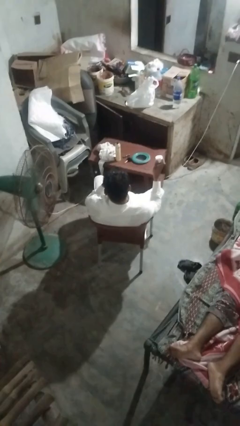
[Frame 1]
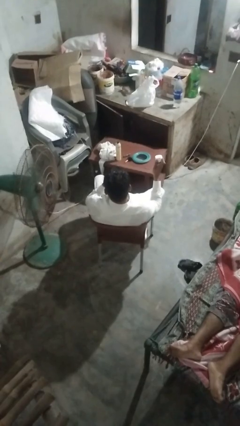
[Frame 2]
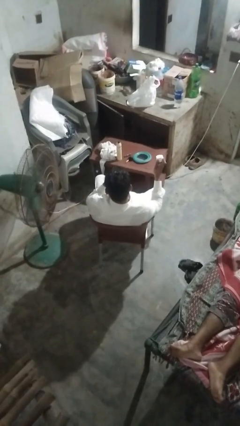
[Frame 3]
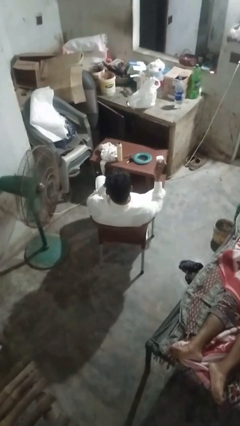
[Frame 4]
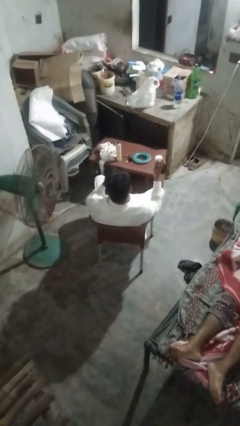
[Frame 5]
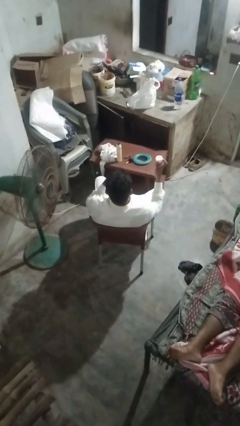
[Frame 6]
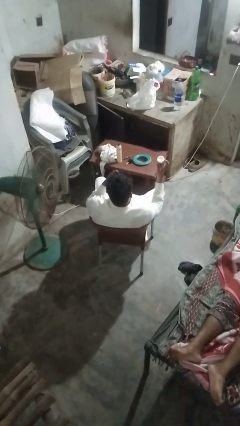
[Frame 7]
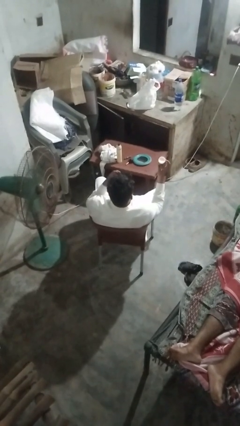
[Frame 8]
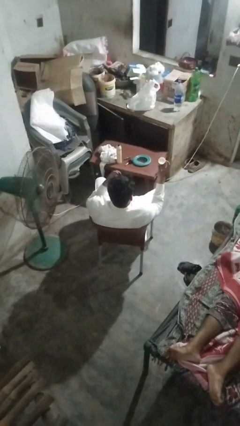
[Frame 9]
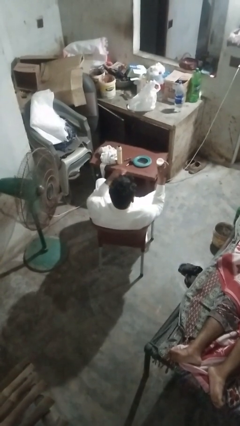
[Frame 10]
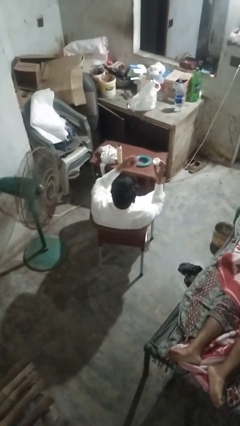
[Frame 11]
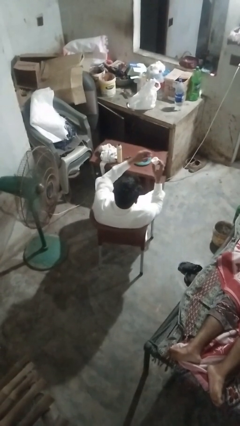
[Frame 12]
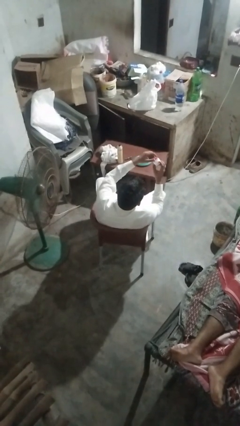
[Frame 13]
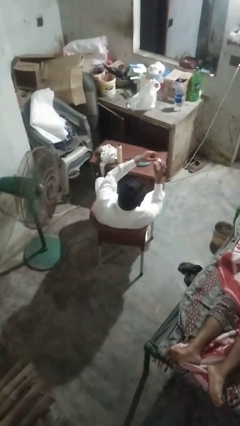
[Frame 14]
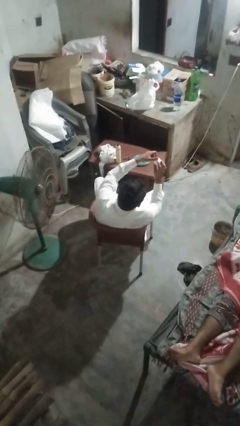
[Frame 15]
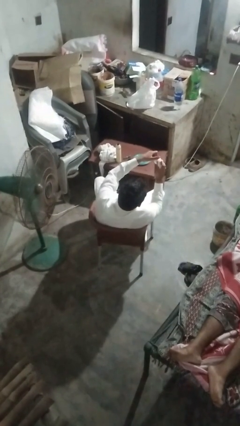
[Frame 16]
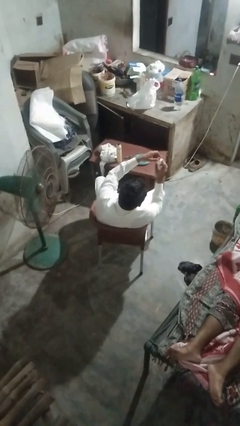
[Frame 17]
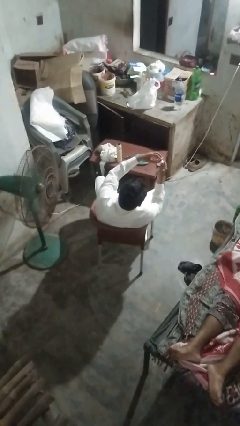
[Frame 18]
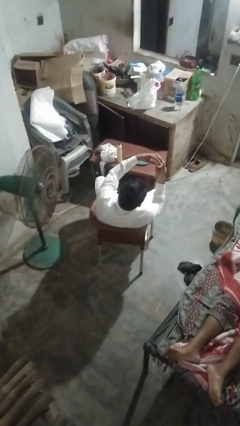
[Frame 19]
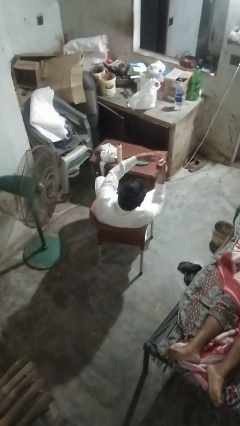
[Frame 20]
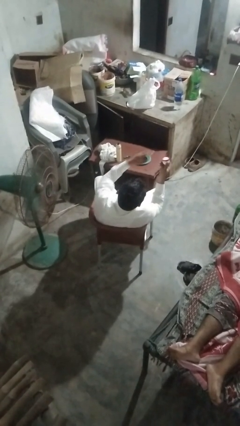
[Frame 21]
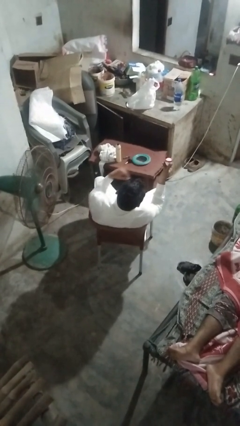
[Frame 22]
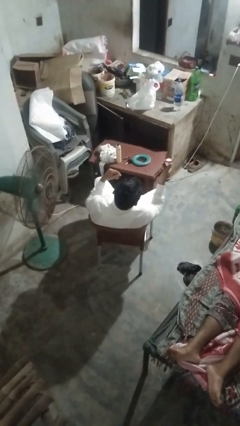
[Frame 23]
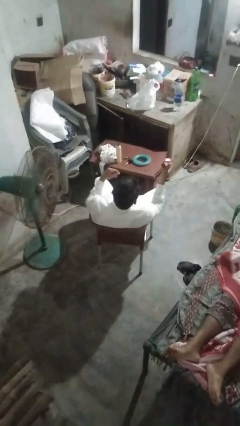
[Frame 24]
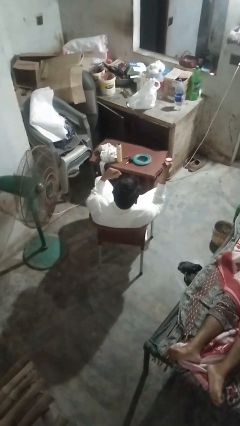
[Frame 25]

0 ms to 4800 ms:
person closes jar

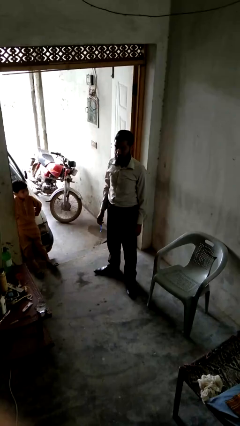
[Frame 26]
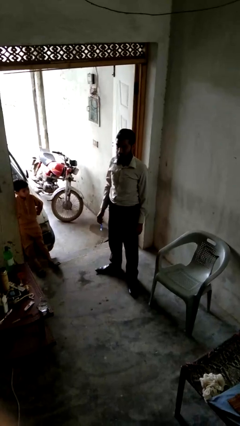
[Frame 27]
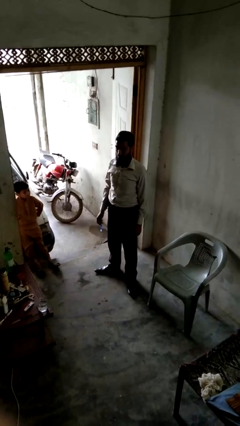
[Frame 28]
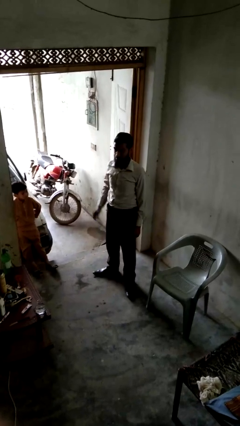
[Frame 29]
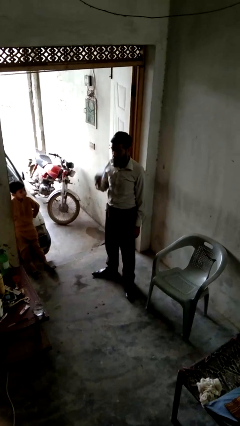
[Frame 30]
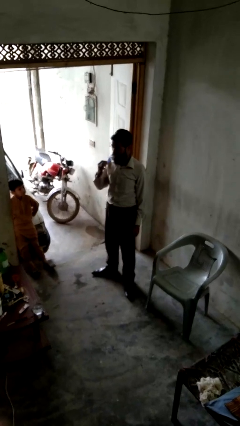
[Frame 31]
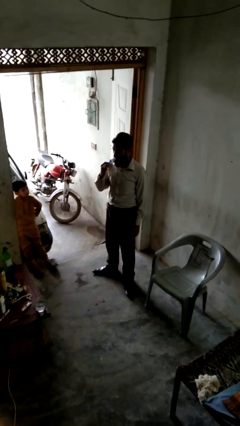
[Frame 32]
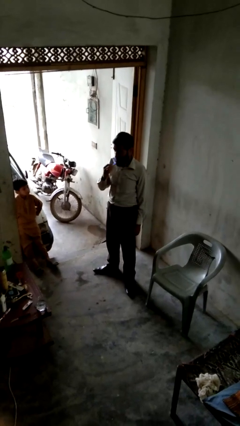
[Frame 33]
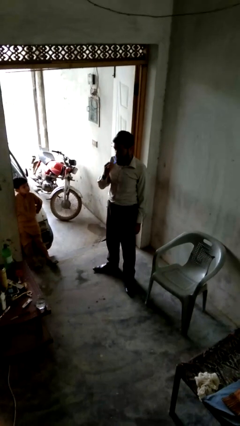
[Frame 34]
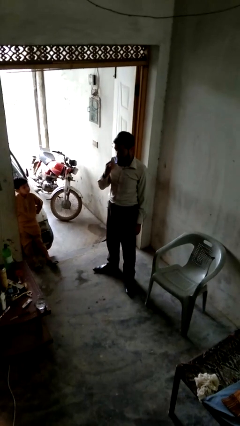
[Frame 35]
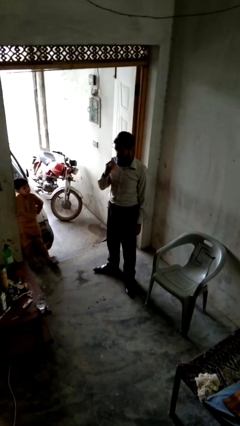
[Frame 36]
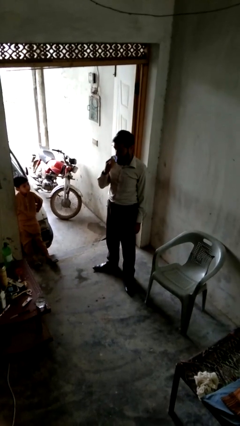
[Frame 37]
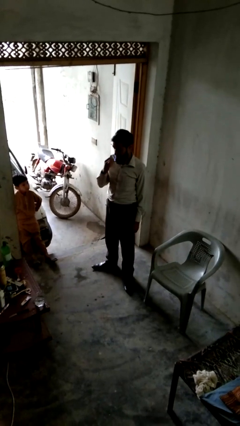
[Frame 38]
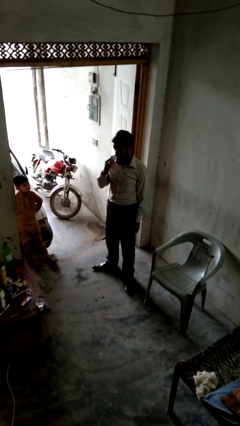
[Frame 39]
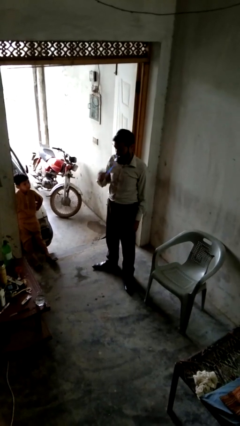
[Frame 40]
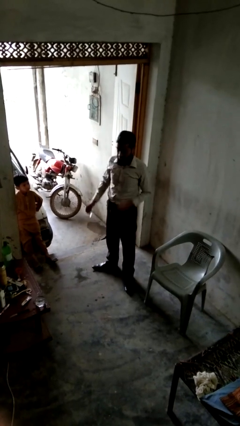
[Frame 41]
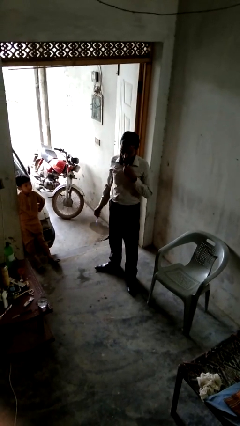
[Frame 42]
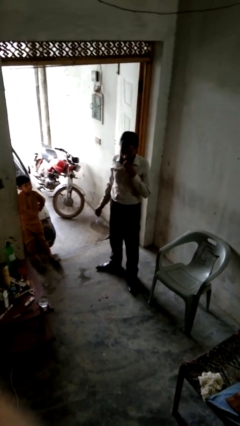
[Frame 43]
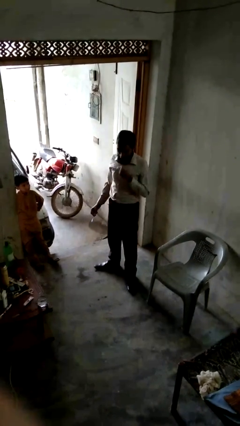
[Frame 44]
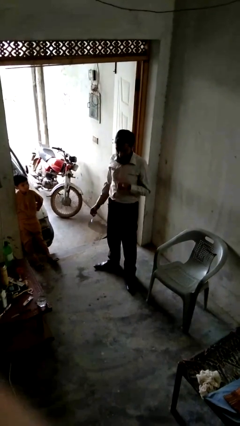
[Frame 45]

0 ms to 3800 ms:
person brushes teeth

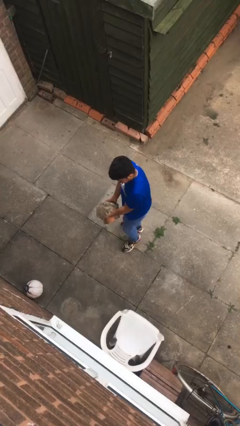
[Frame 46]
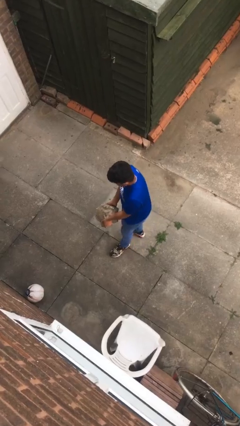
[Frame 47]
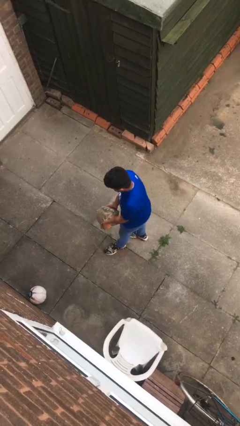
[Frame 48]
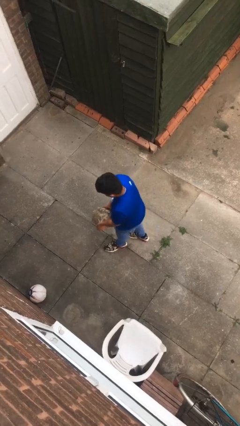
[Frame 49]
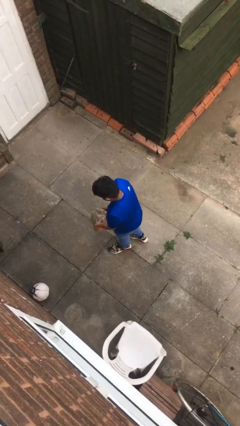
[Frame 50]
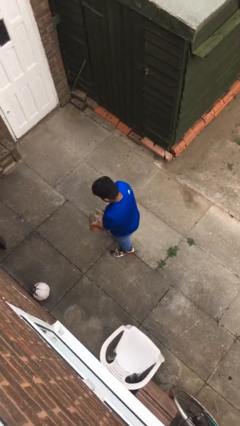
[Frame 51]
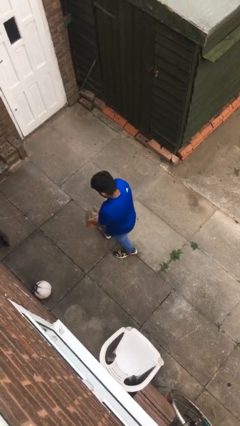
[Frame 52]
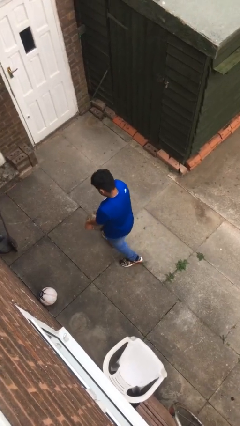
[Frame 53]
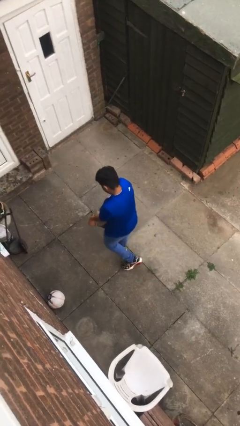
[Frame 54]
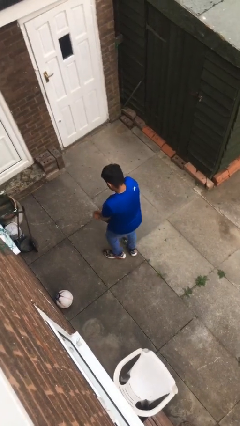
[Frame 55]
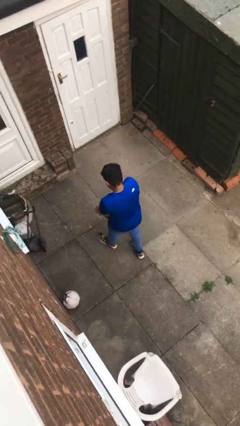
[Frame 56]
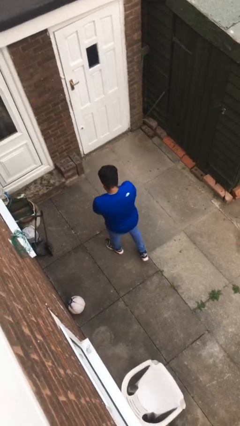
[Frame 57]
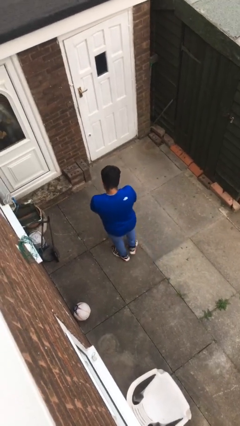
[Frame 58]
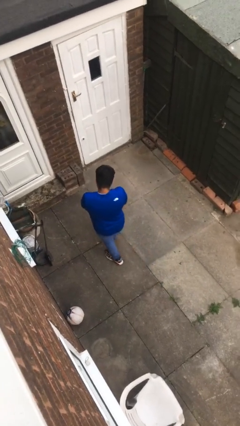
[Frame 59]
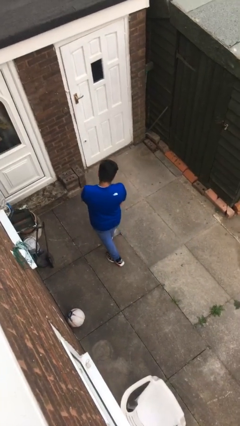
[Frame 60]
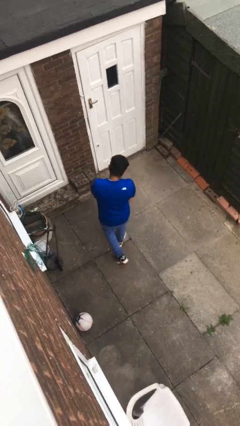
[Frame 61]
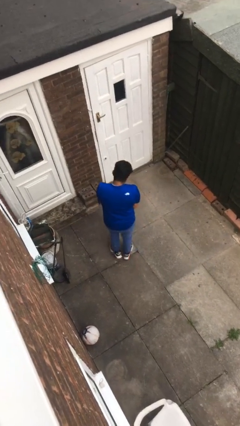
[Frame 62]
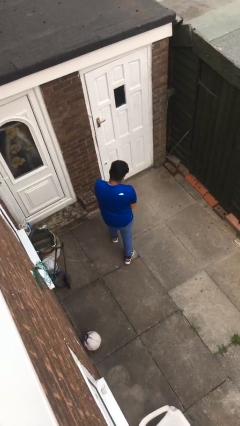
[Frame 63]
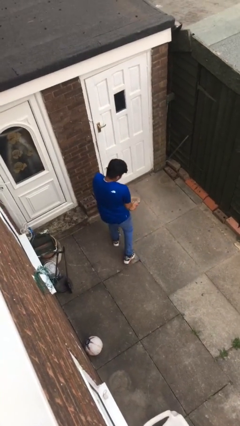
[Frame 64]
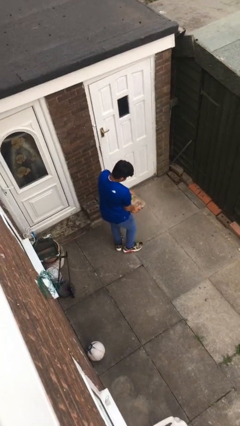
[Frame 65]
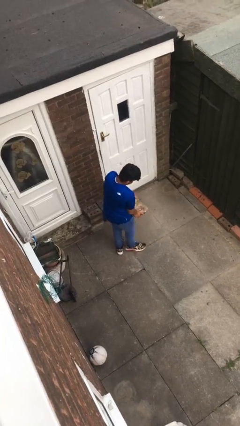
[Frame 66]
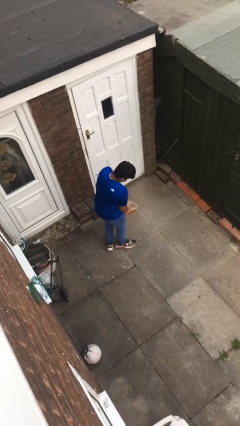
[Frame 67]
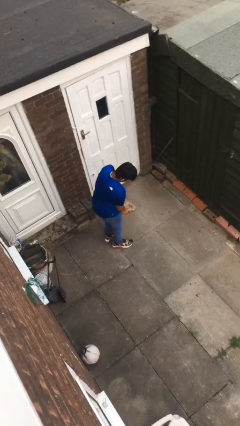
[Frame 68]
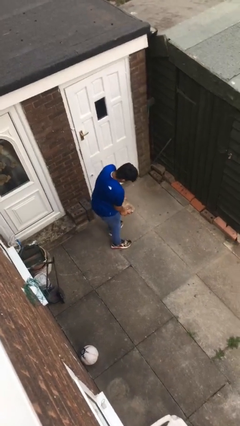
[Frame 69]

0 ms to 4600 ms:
person carries heavy object

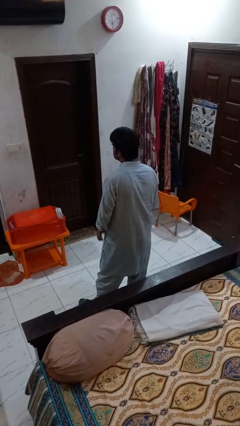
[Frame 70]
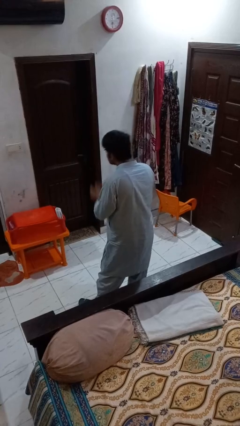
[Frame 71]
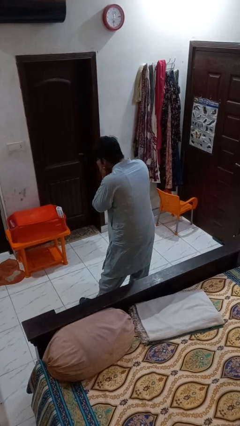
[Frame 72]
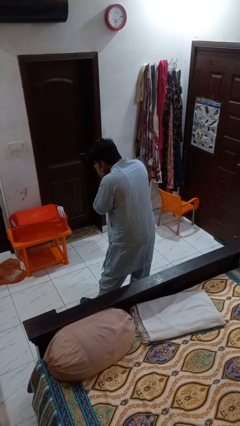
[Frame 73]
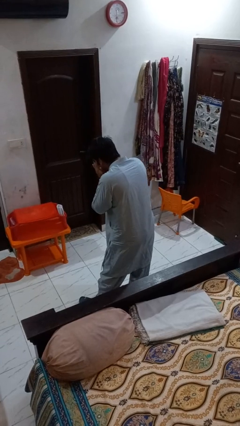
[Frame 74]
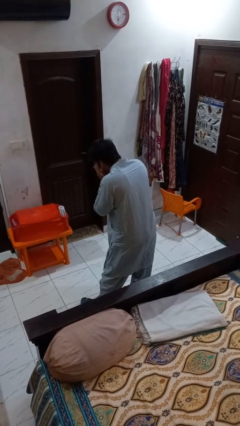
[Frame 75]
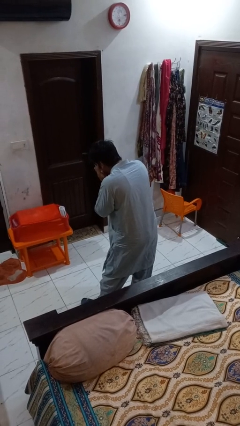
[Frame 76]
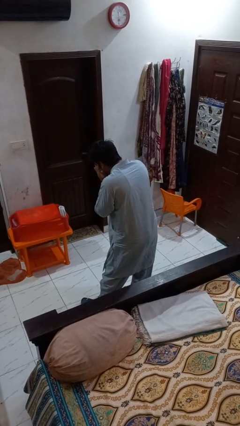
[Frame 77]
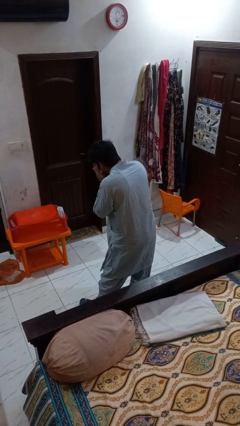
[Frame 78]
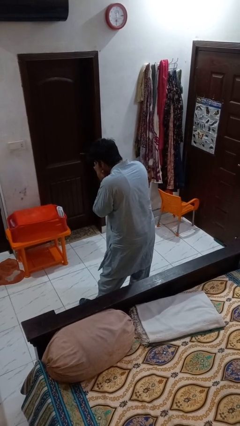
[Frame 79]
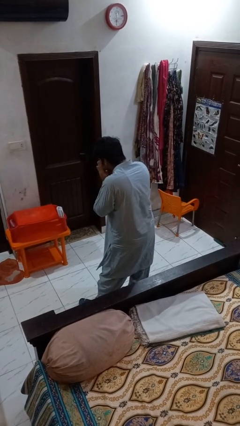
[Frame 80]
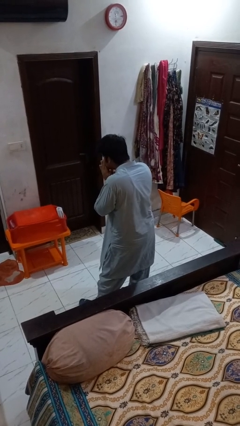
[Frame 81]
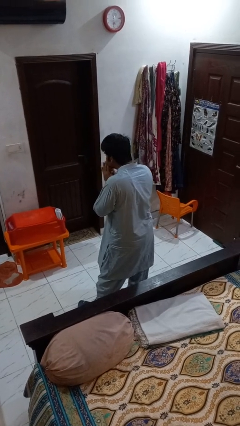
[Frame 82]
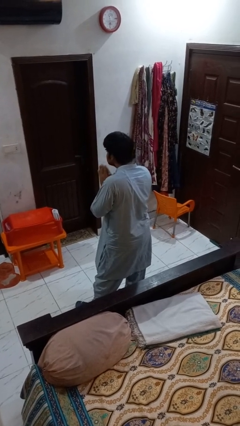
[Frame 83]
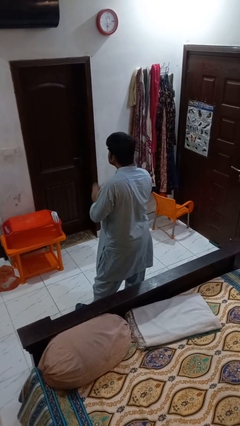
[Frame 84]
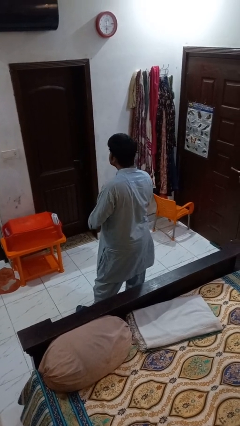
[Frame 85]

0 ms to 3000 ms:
person sneezes into hand

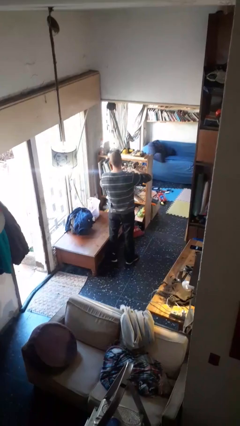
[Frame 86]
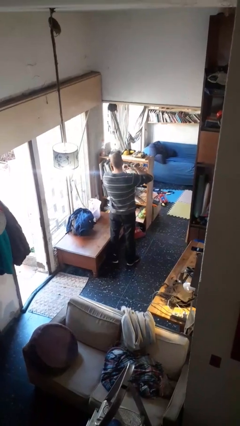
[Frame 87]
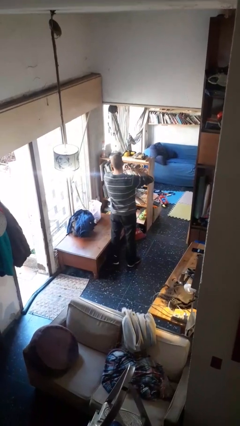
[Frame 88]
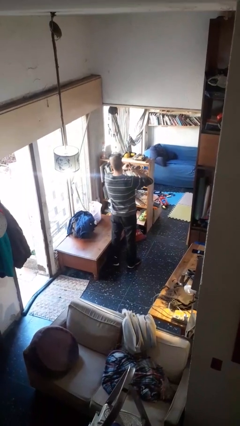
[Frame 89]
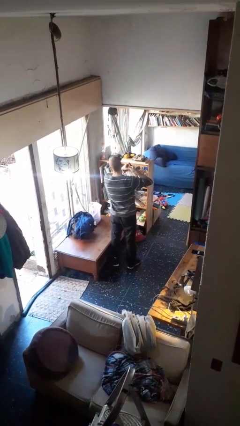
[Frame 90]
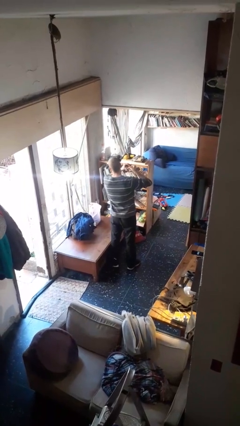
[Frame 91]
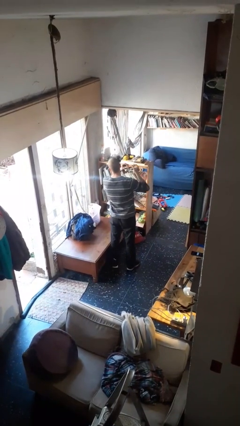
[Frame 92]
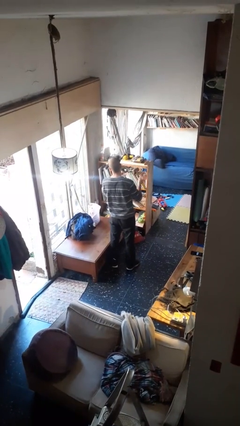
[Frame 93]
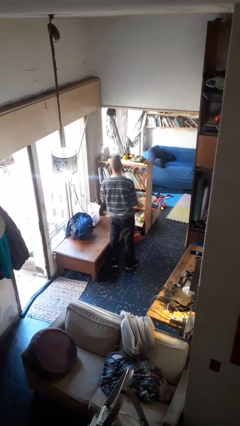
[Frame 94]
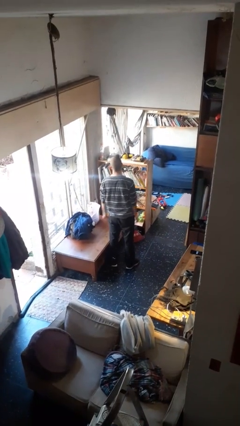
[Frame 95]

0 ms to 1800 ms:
person takes off ring
